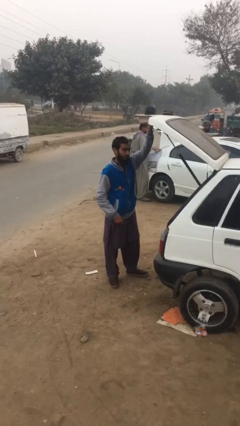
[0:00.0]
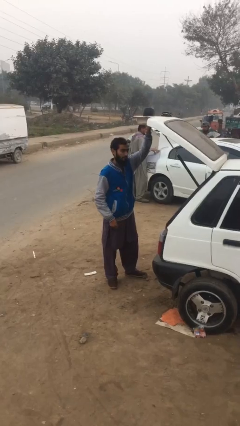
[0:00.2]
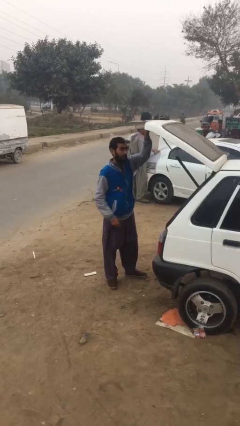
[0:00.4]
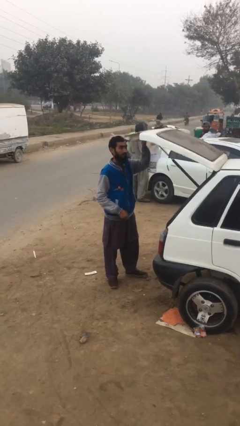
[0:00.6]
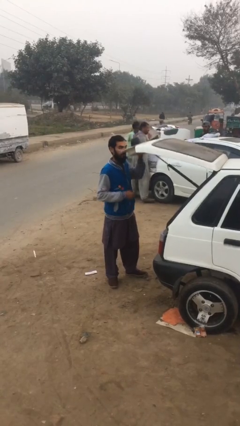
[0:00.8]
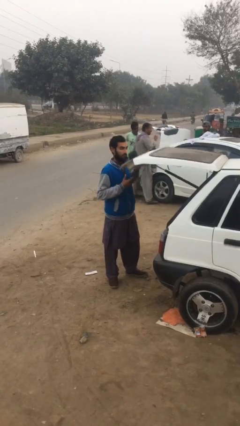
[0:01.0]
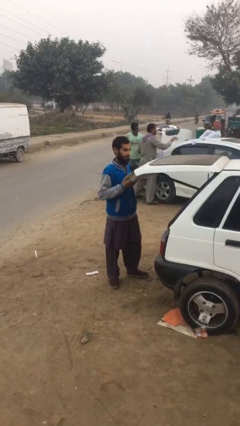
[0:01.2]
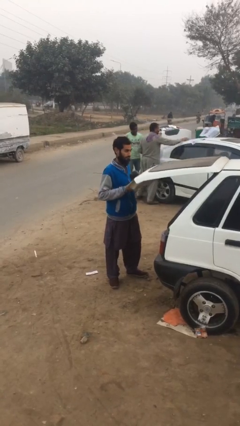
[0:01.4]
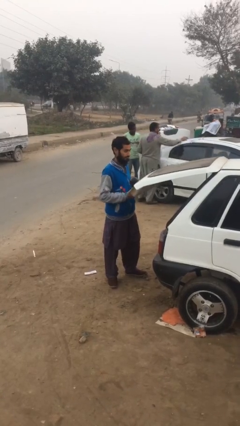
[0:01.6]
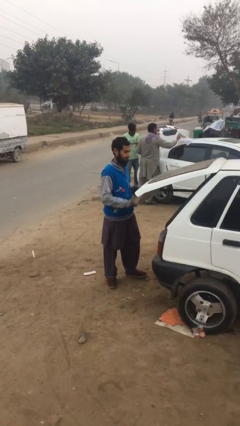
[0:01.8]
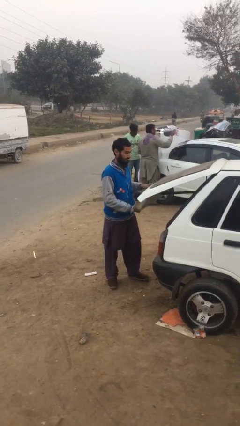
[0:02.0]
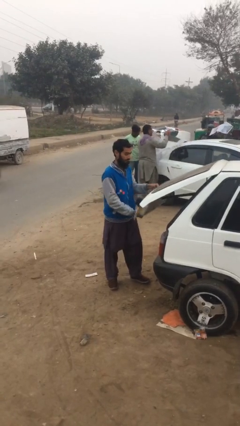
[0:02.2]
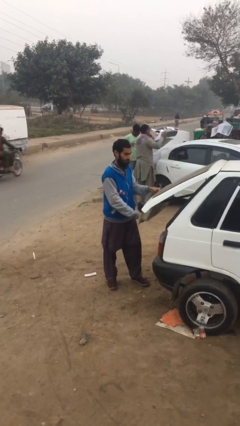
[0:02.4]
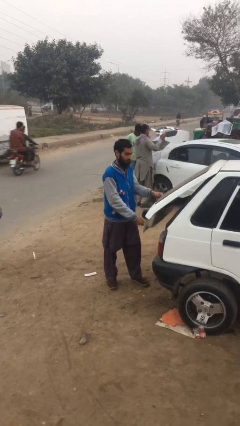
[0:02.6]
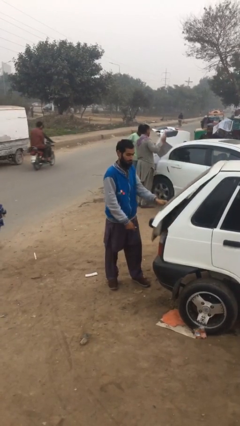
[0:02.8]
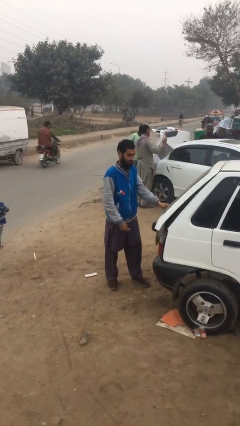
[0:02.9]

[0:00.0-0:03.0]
person closes car trunk

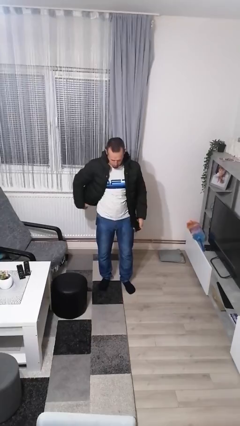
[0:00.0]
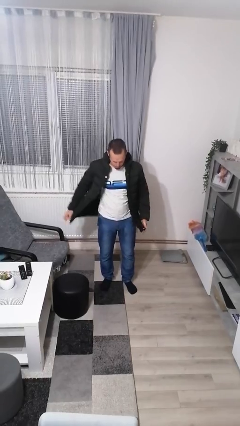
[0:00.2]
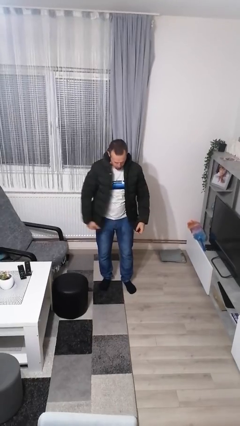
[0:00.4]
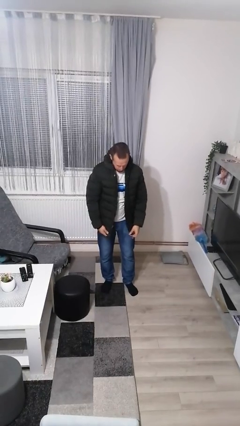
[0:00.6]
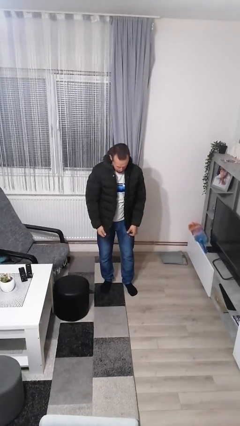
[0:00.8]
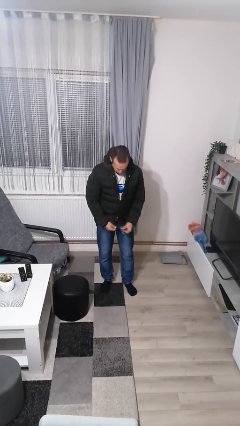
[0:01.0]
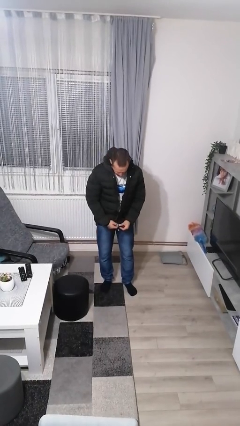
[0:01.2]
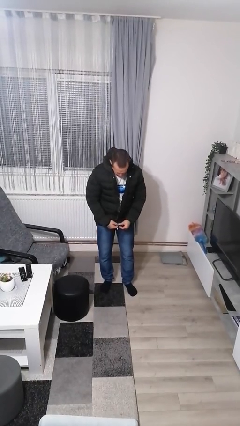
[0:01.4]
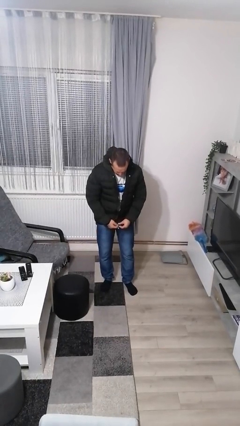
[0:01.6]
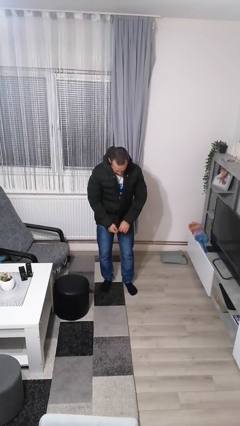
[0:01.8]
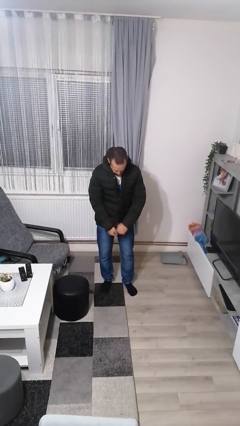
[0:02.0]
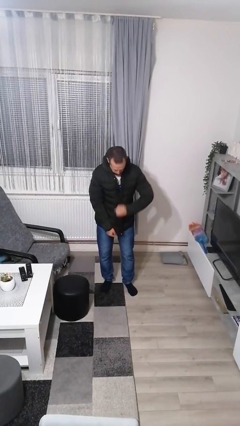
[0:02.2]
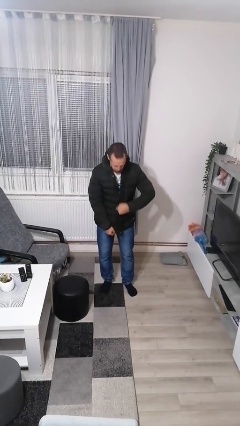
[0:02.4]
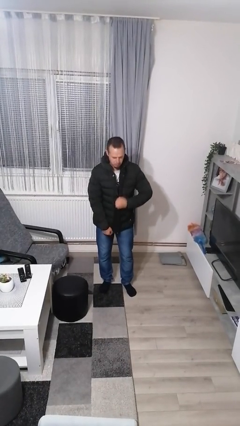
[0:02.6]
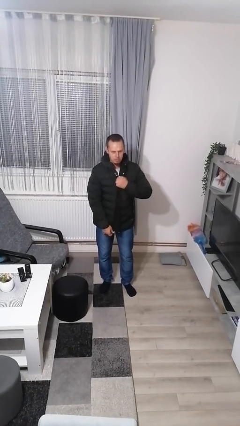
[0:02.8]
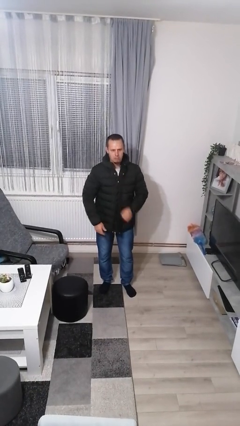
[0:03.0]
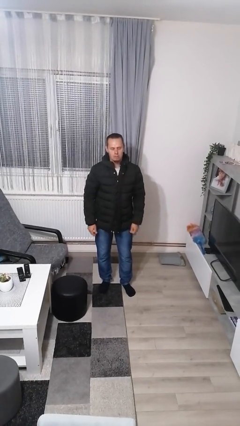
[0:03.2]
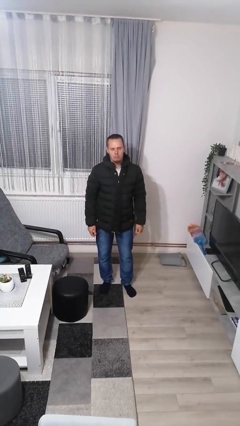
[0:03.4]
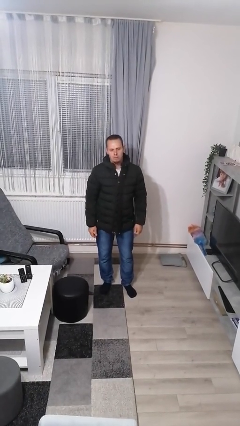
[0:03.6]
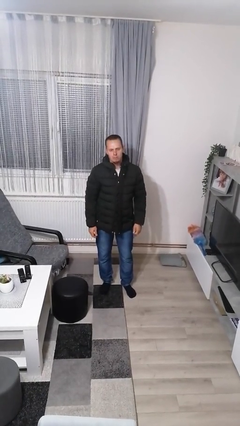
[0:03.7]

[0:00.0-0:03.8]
person zips up jacket

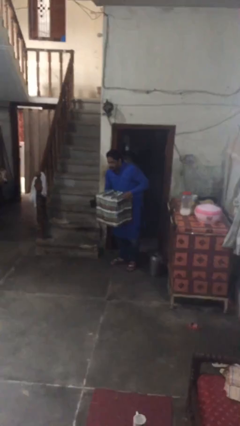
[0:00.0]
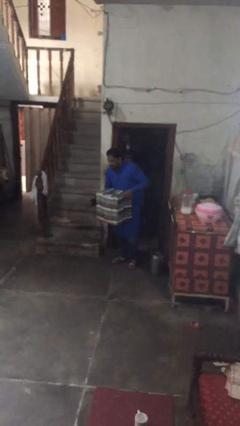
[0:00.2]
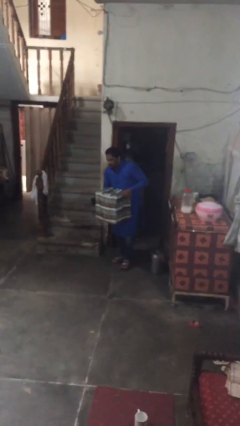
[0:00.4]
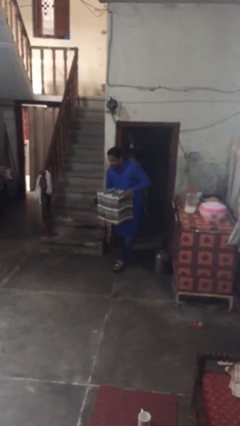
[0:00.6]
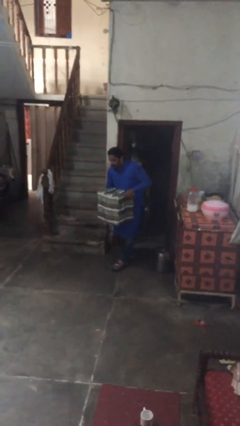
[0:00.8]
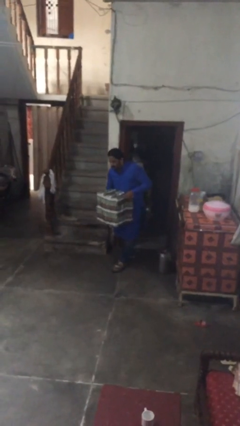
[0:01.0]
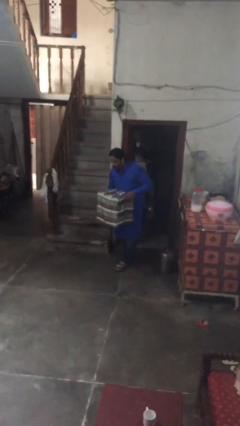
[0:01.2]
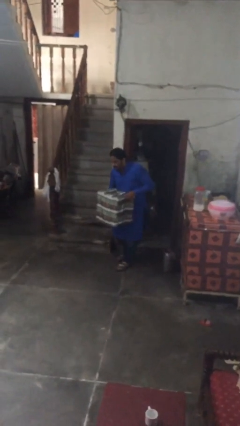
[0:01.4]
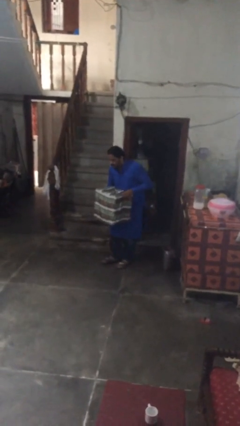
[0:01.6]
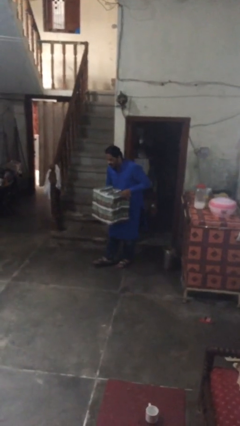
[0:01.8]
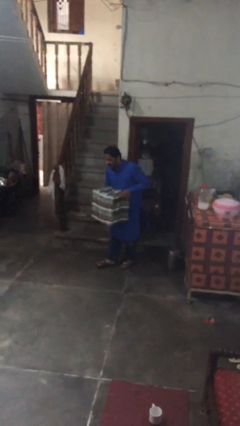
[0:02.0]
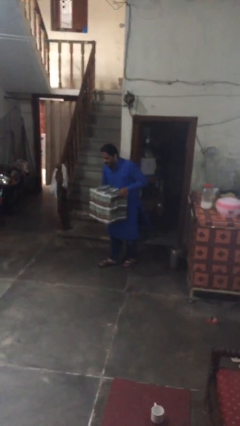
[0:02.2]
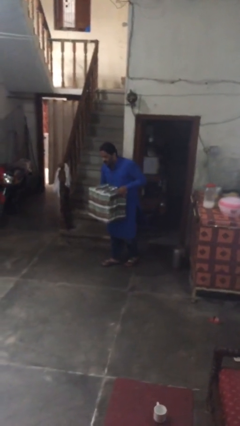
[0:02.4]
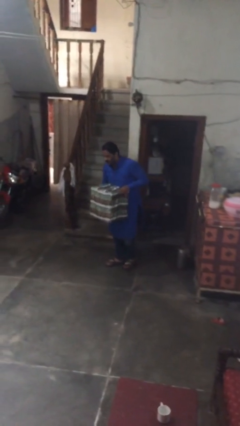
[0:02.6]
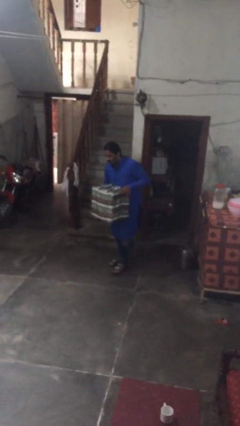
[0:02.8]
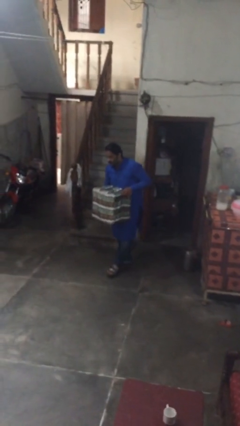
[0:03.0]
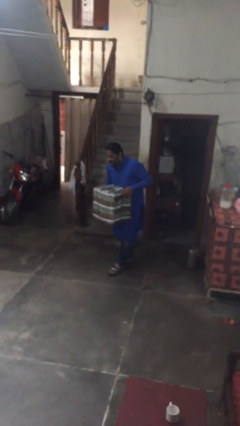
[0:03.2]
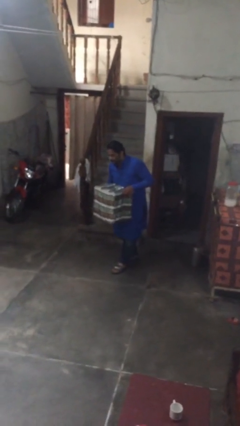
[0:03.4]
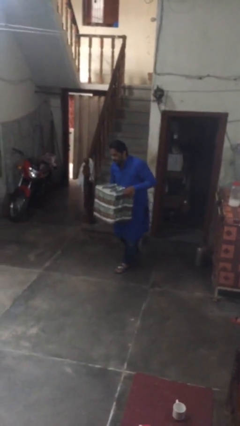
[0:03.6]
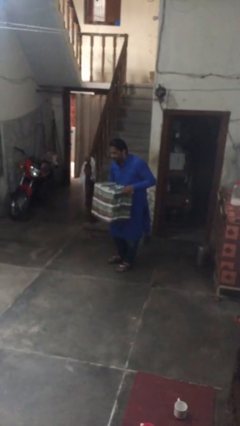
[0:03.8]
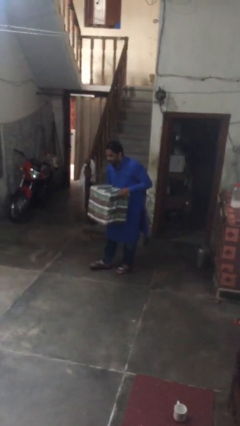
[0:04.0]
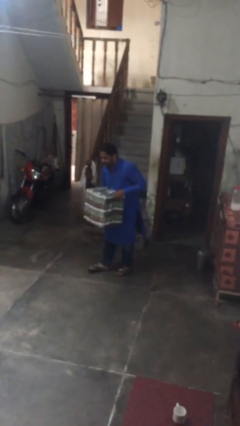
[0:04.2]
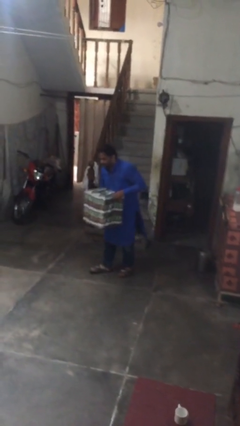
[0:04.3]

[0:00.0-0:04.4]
person carries heavy object

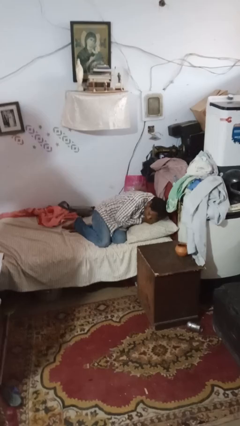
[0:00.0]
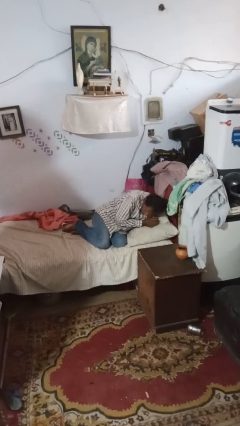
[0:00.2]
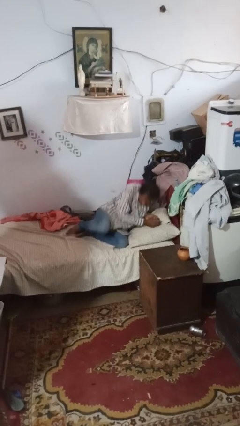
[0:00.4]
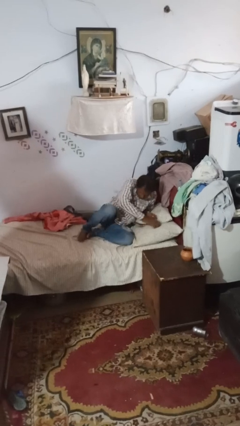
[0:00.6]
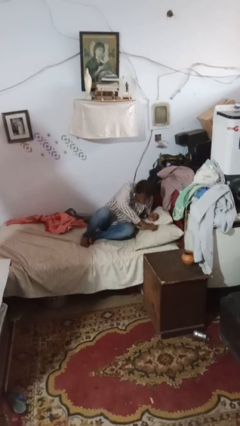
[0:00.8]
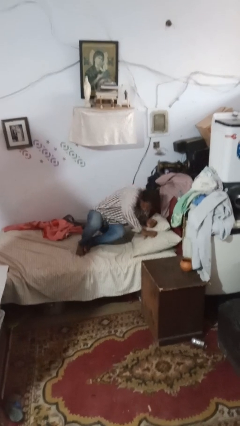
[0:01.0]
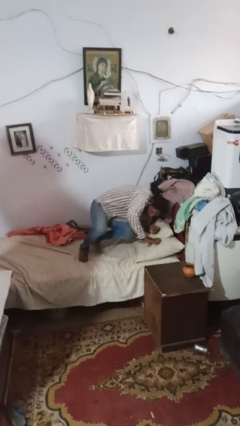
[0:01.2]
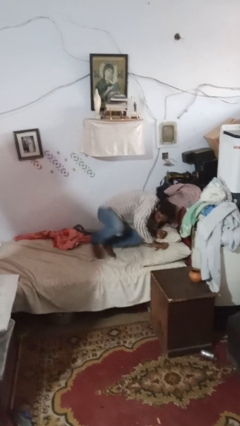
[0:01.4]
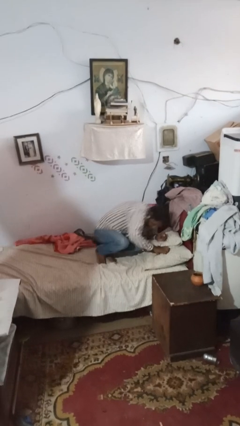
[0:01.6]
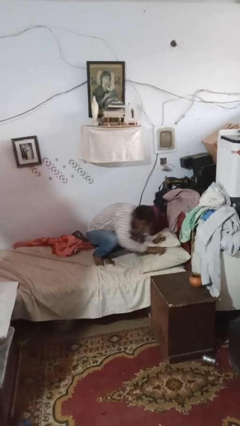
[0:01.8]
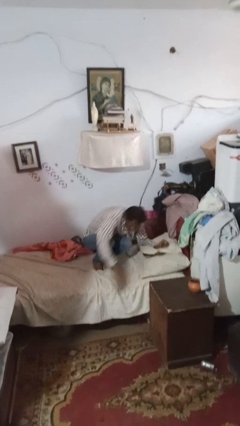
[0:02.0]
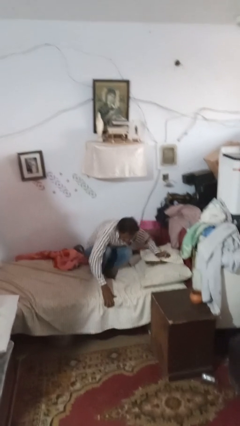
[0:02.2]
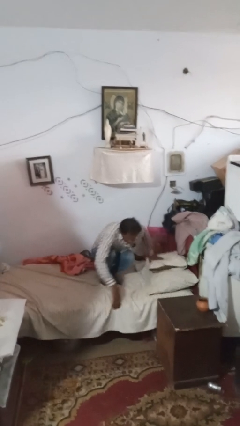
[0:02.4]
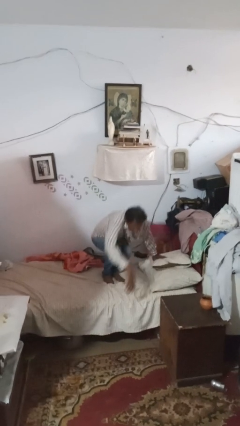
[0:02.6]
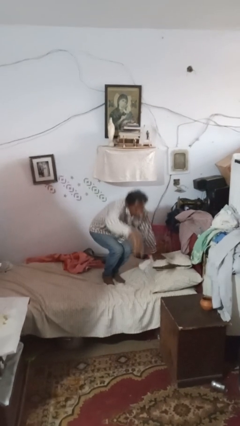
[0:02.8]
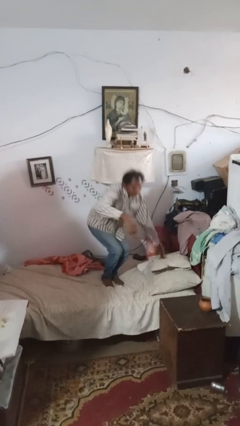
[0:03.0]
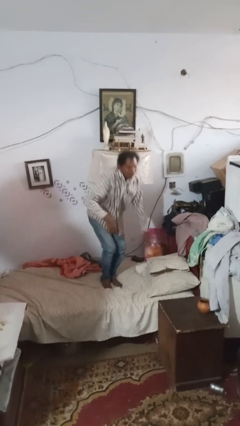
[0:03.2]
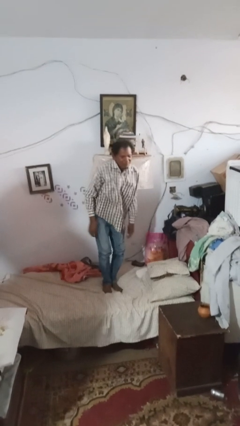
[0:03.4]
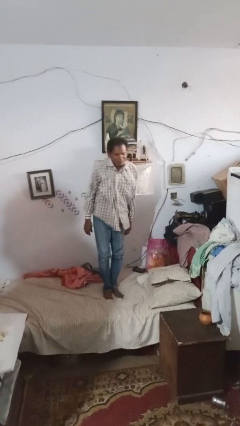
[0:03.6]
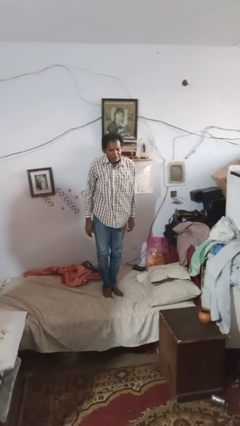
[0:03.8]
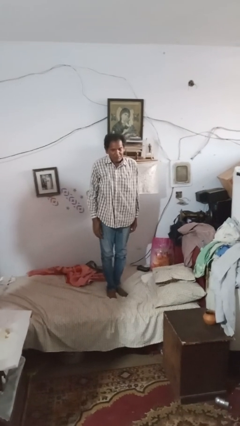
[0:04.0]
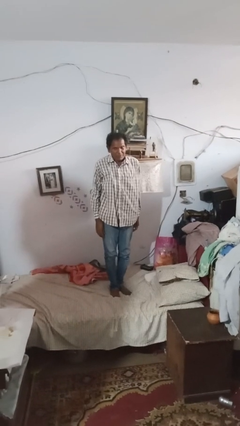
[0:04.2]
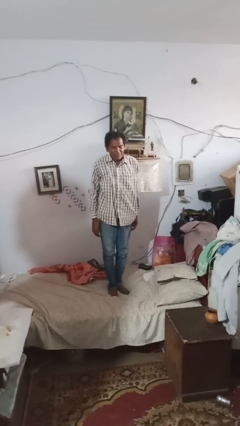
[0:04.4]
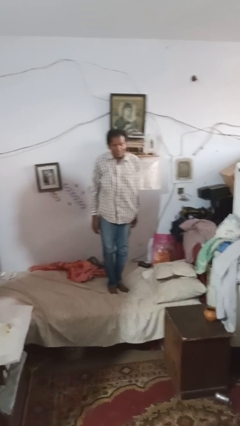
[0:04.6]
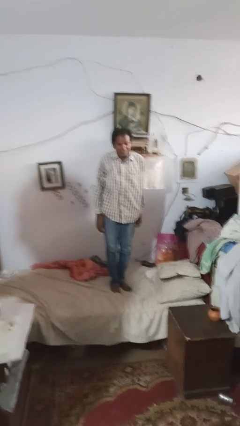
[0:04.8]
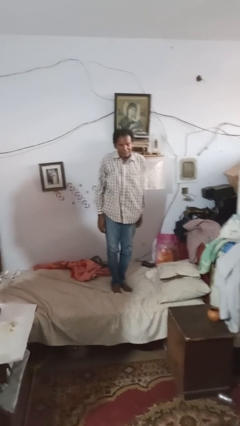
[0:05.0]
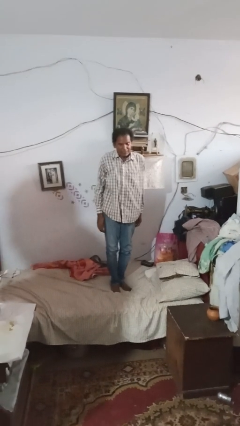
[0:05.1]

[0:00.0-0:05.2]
person stands up

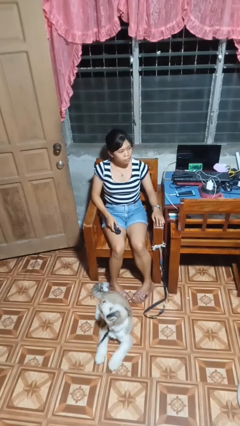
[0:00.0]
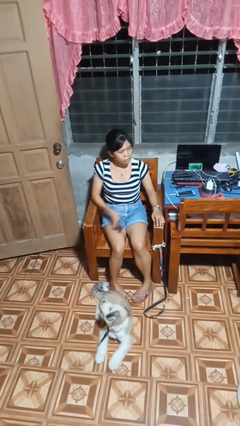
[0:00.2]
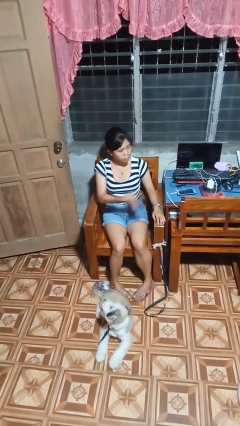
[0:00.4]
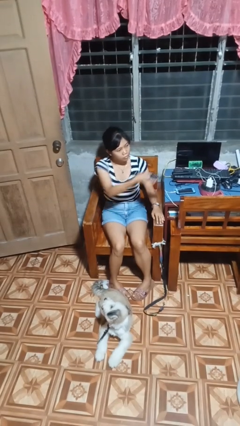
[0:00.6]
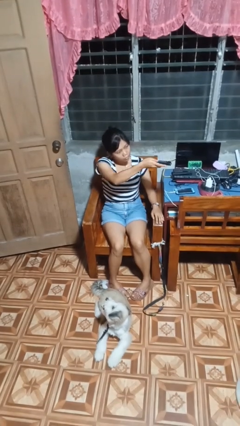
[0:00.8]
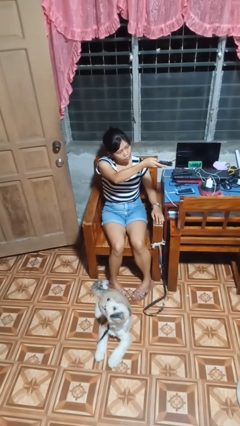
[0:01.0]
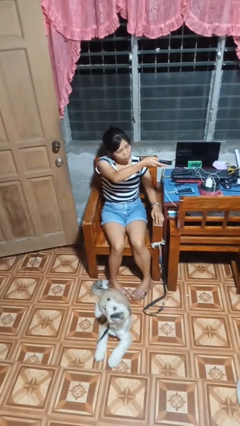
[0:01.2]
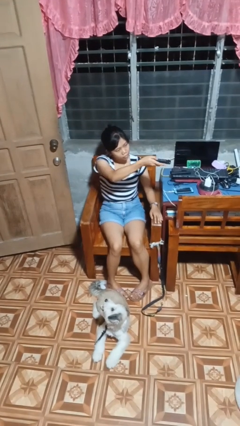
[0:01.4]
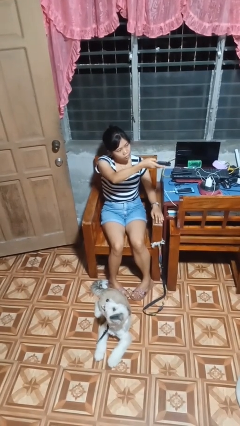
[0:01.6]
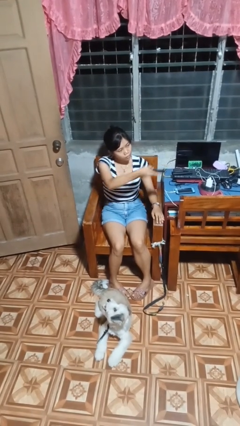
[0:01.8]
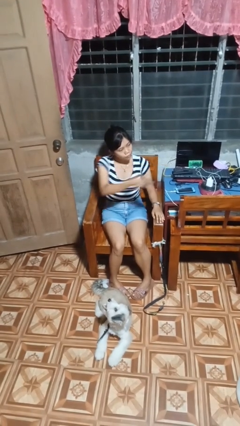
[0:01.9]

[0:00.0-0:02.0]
person uses television remote
